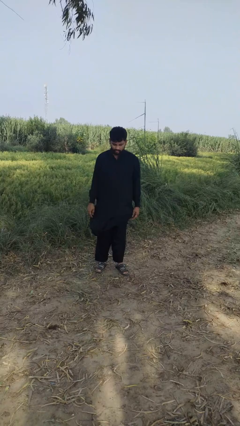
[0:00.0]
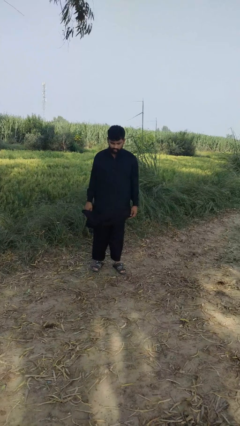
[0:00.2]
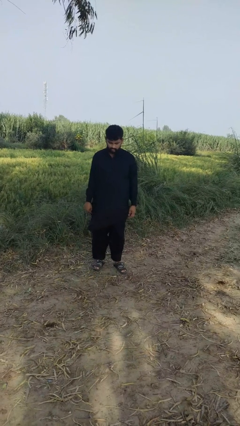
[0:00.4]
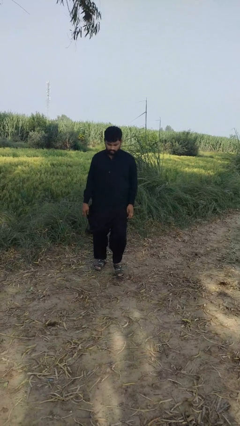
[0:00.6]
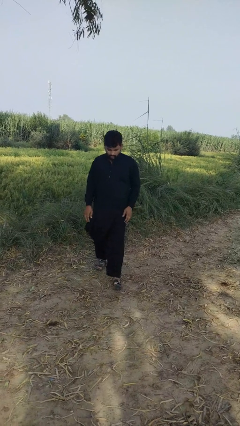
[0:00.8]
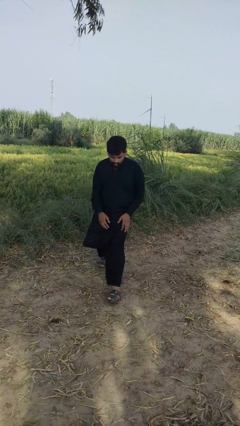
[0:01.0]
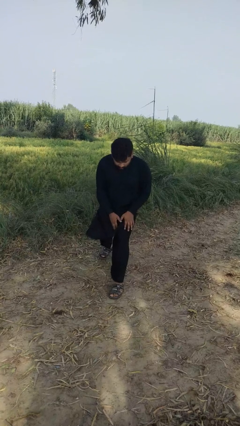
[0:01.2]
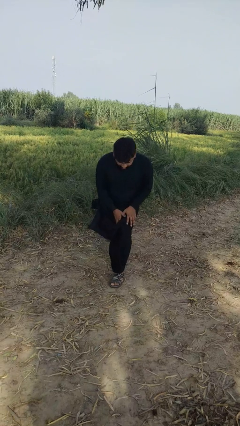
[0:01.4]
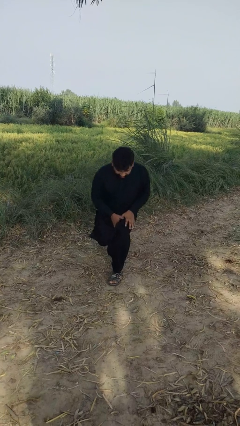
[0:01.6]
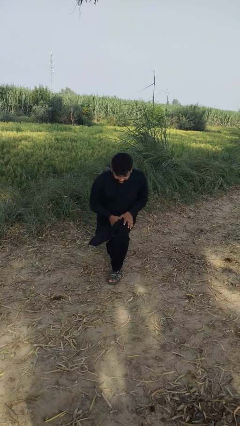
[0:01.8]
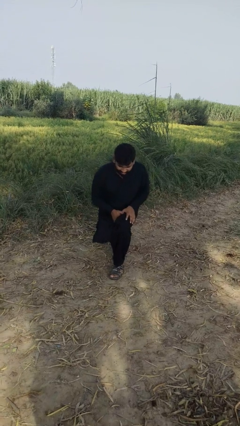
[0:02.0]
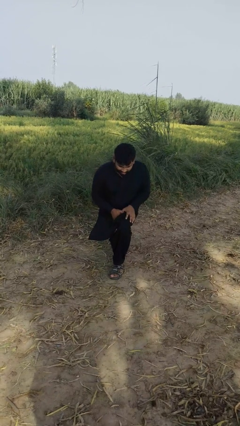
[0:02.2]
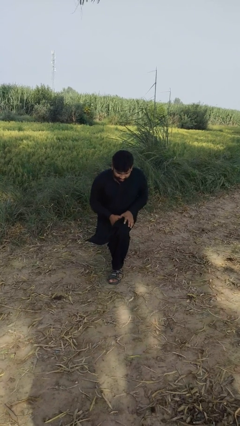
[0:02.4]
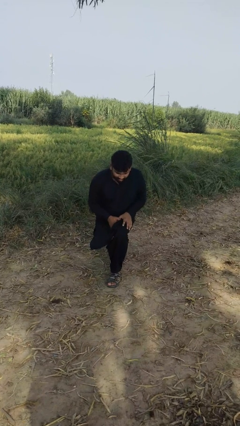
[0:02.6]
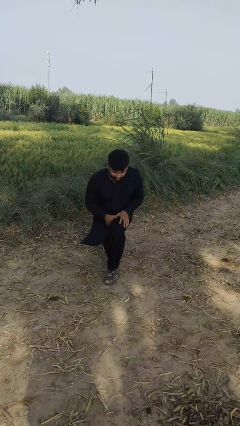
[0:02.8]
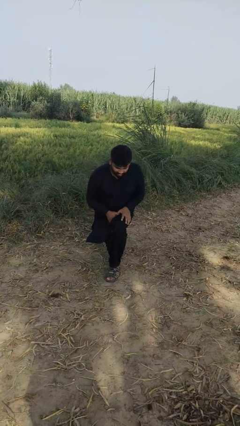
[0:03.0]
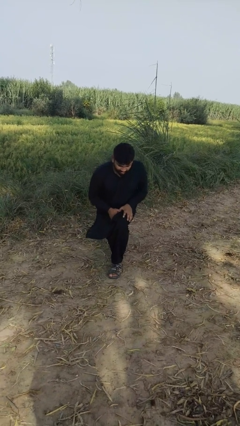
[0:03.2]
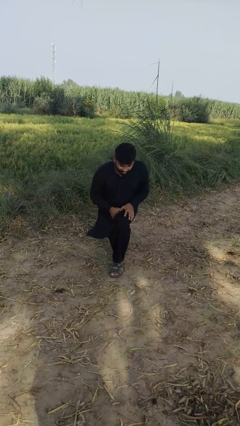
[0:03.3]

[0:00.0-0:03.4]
person exercises with lunges

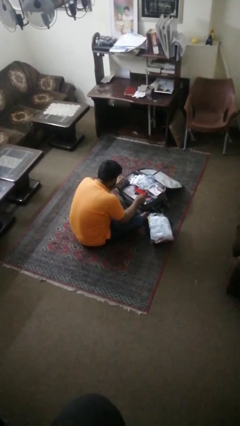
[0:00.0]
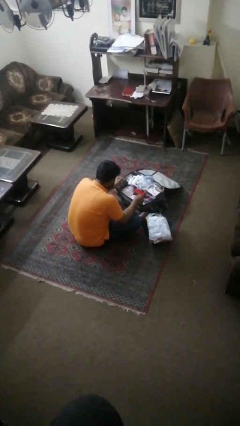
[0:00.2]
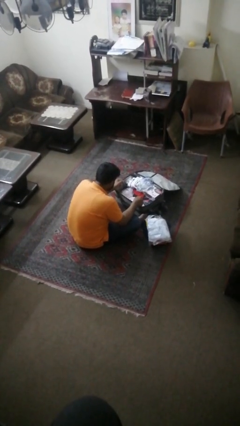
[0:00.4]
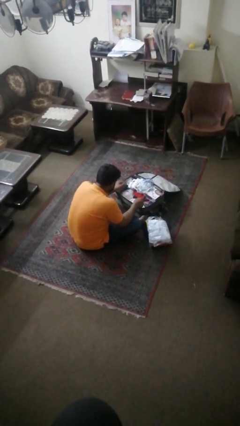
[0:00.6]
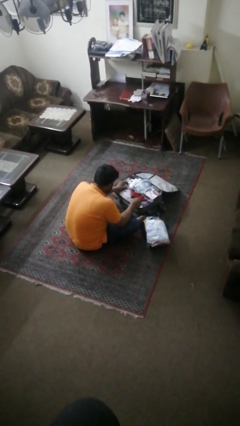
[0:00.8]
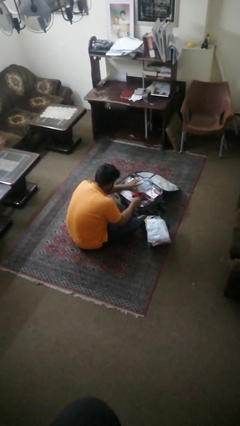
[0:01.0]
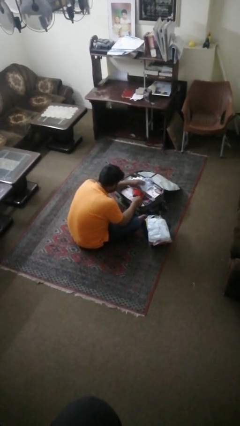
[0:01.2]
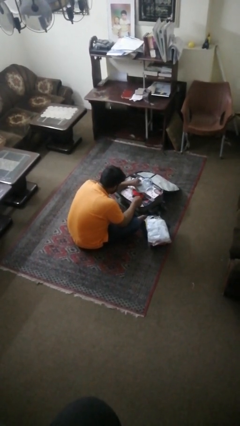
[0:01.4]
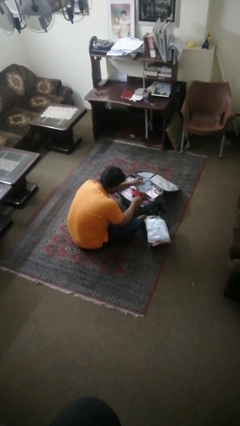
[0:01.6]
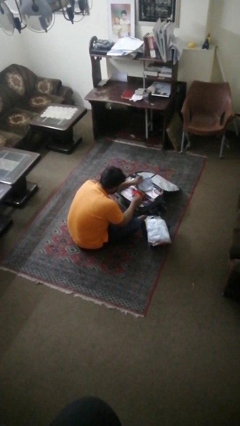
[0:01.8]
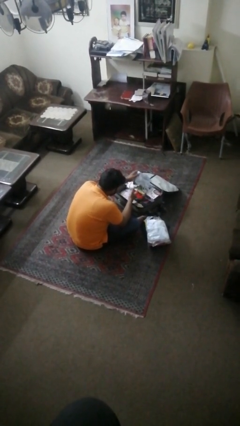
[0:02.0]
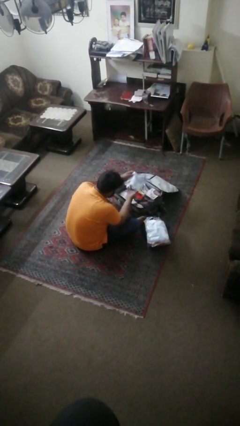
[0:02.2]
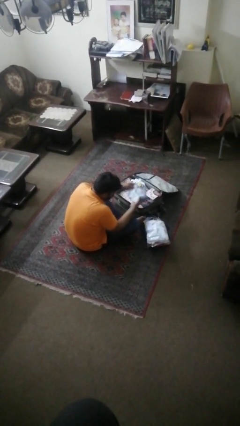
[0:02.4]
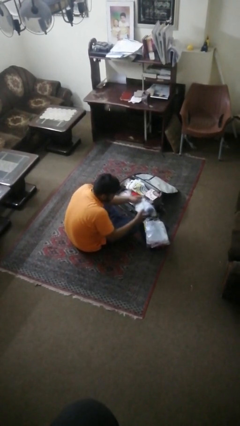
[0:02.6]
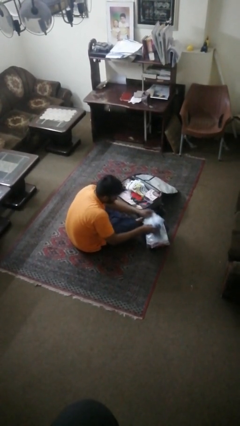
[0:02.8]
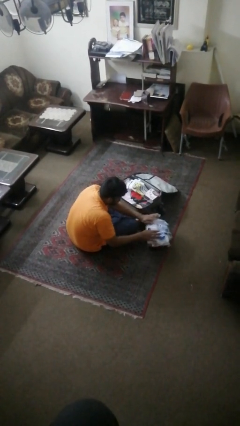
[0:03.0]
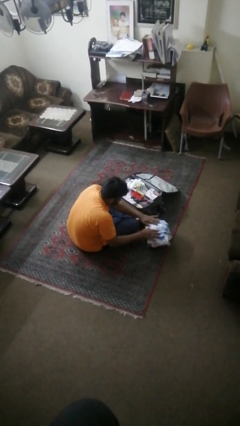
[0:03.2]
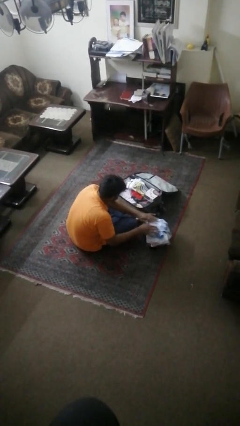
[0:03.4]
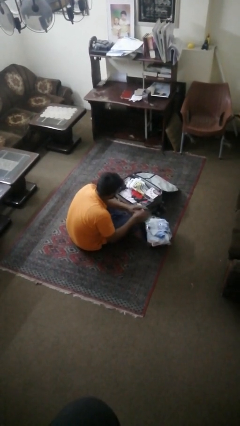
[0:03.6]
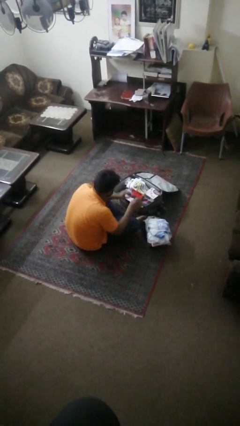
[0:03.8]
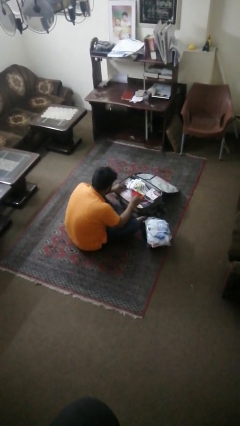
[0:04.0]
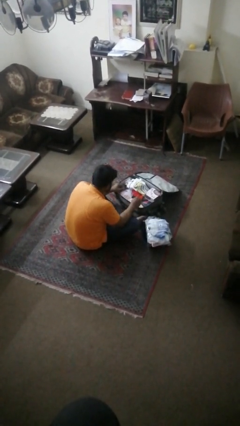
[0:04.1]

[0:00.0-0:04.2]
person unloads clothes from suitcase

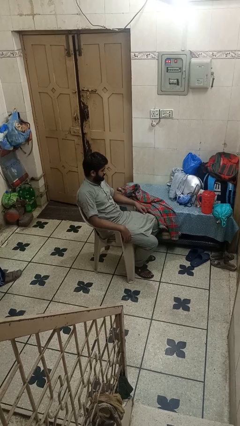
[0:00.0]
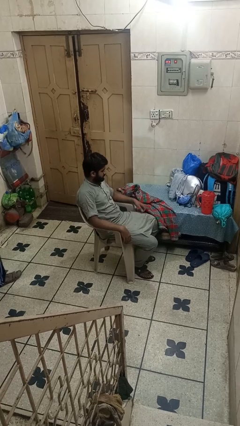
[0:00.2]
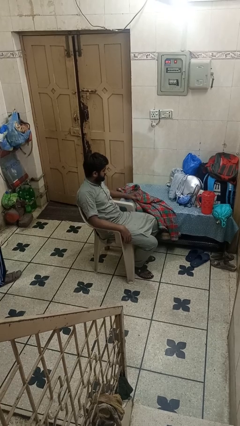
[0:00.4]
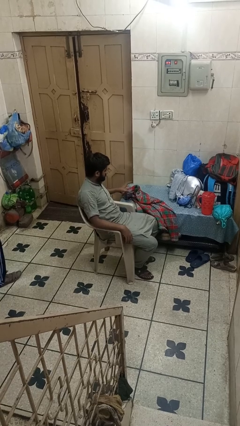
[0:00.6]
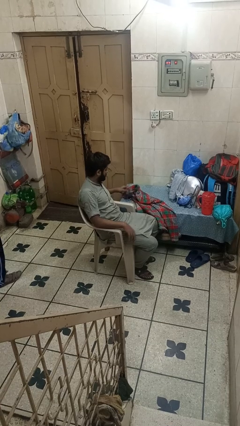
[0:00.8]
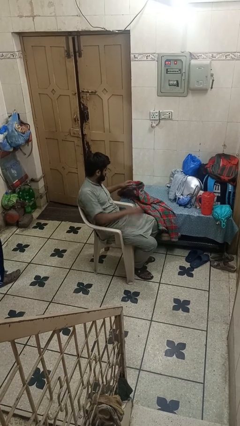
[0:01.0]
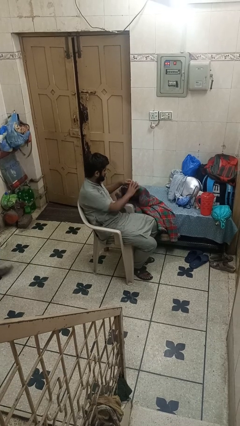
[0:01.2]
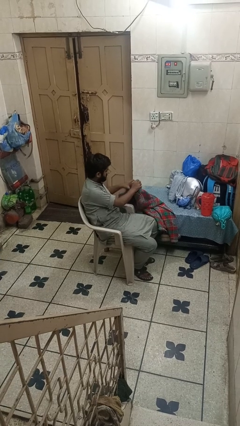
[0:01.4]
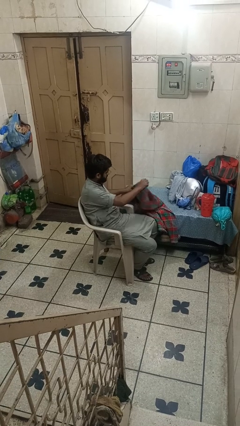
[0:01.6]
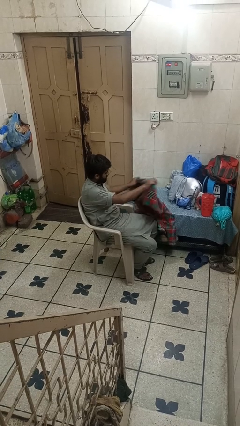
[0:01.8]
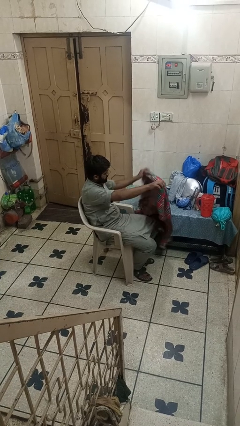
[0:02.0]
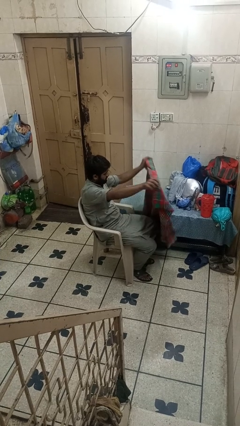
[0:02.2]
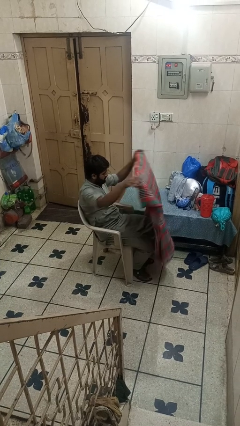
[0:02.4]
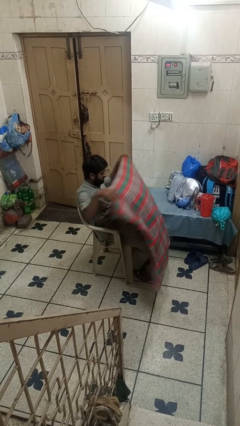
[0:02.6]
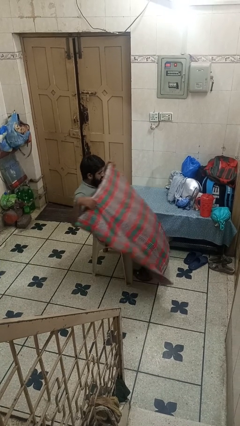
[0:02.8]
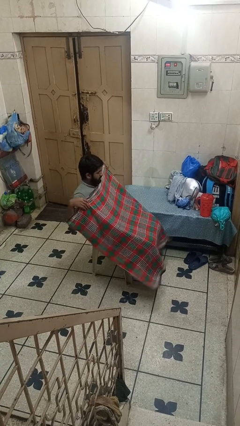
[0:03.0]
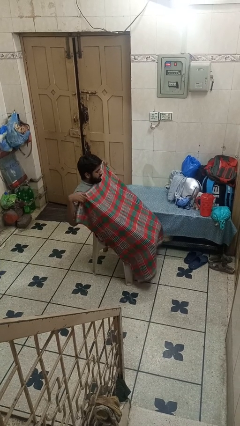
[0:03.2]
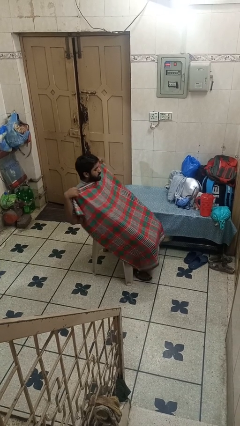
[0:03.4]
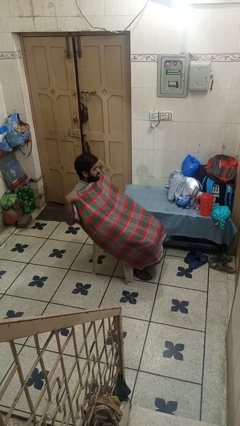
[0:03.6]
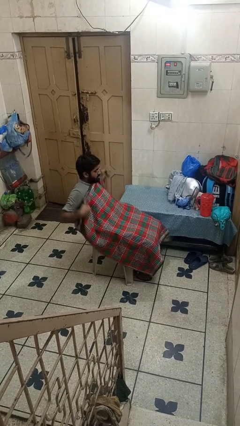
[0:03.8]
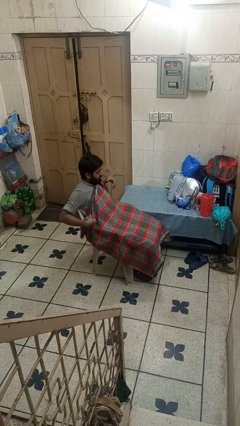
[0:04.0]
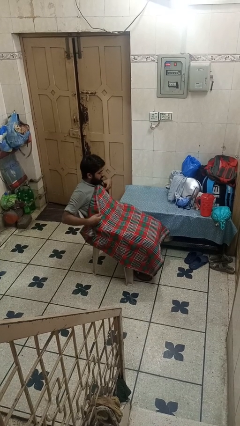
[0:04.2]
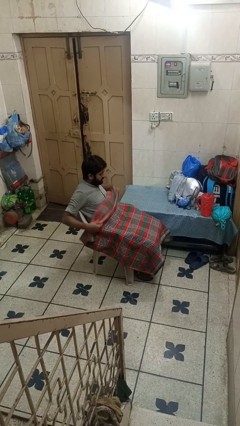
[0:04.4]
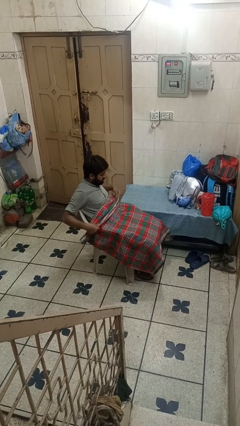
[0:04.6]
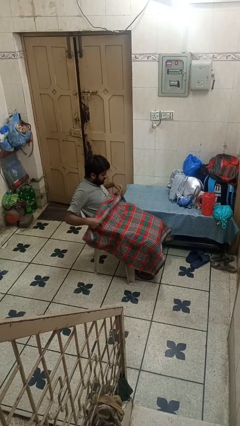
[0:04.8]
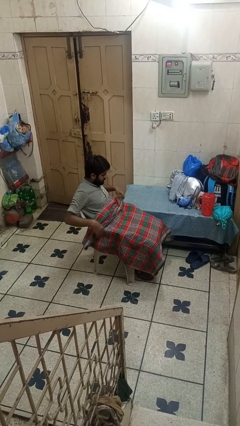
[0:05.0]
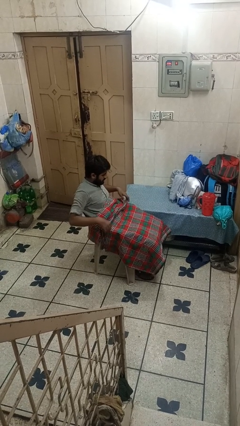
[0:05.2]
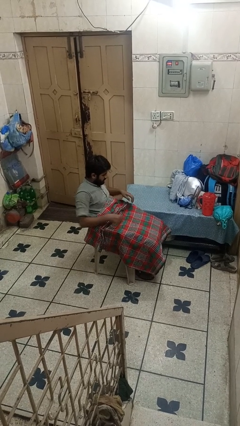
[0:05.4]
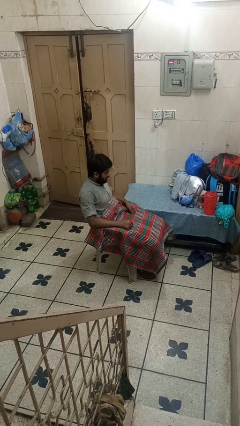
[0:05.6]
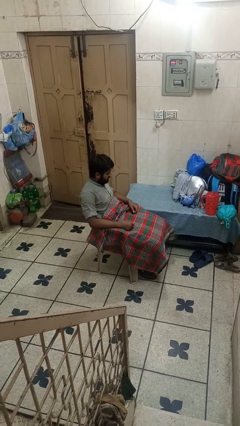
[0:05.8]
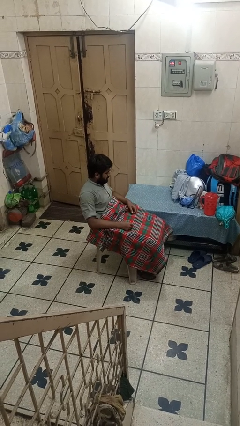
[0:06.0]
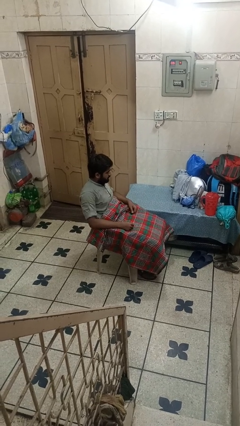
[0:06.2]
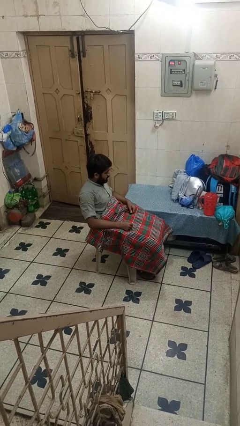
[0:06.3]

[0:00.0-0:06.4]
person covers with blanket

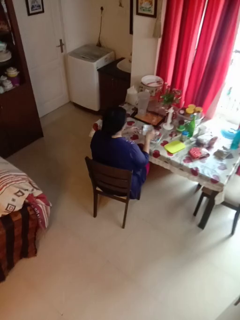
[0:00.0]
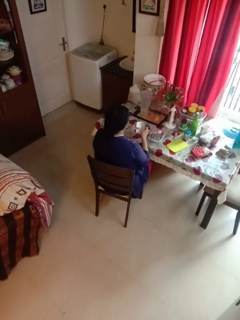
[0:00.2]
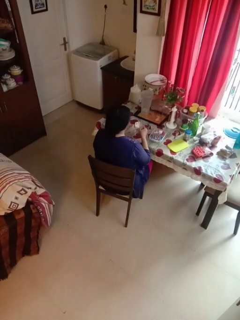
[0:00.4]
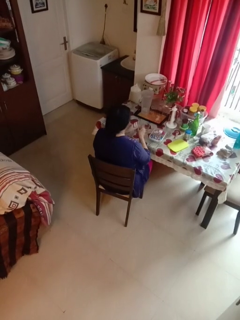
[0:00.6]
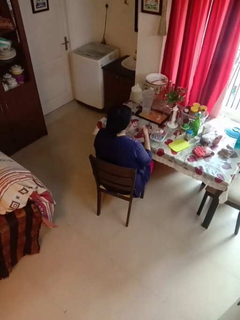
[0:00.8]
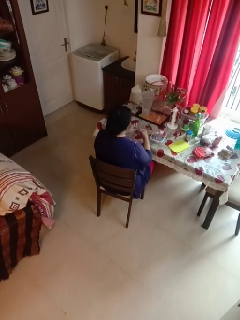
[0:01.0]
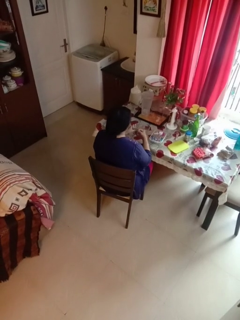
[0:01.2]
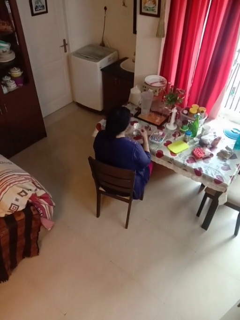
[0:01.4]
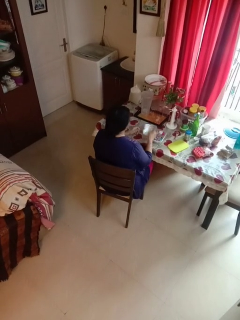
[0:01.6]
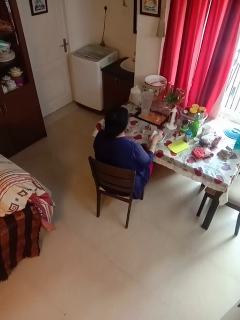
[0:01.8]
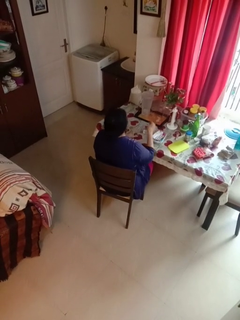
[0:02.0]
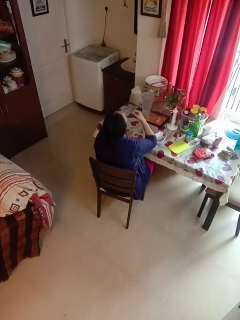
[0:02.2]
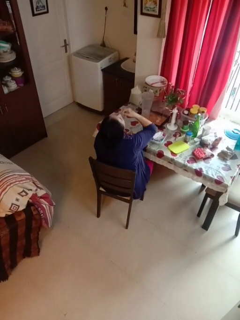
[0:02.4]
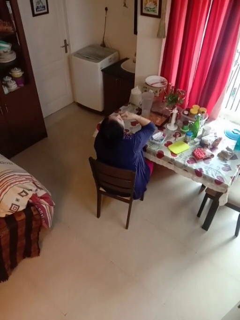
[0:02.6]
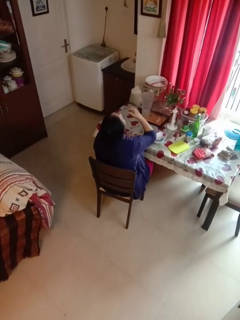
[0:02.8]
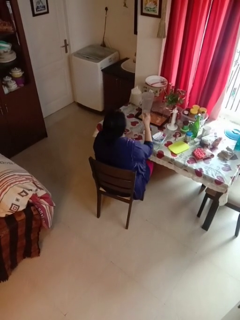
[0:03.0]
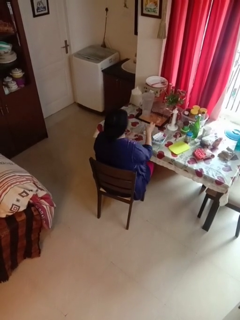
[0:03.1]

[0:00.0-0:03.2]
person takes medicine pills

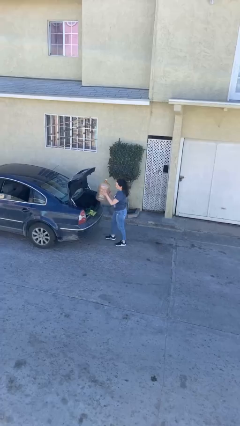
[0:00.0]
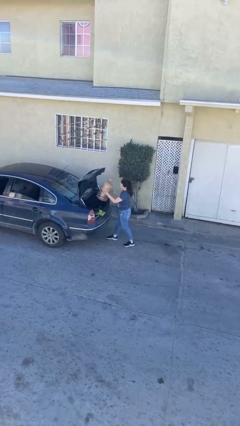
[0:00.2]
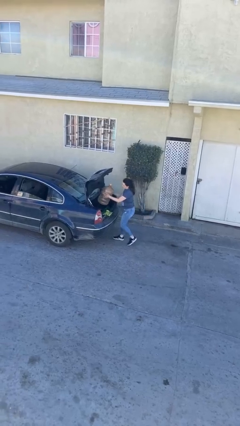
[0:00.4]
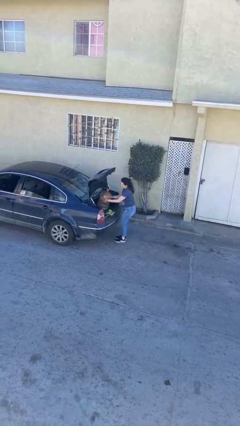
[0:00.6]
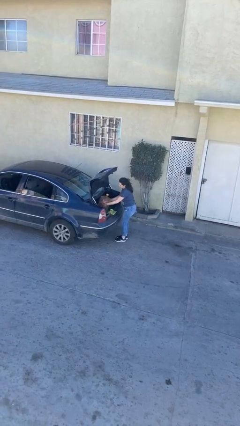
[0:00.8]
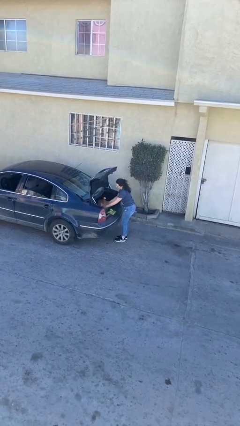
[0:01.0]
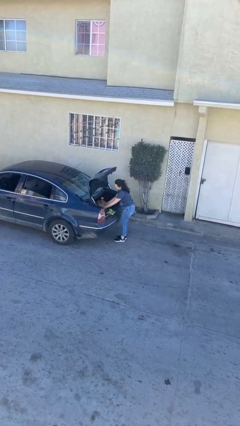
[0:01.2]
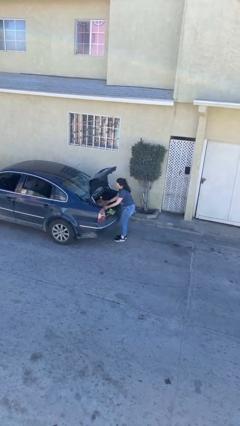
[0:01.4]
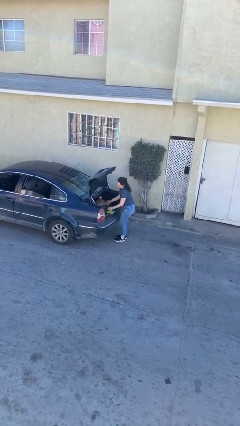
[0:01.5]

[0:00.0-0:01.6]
person loads car
